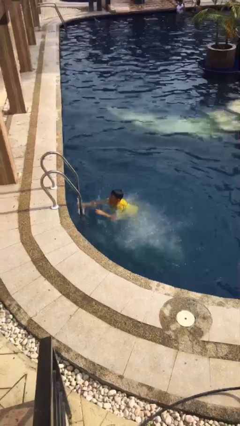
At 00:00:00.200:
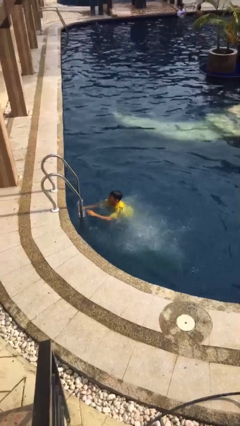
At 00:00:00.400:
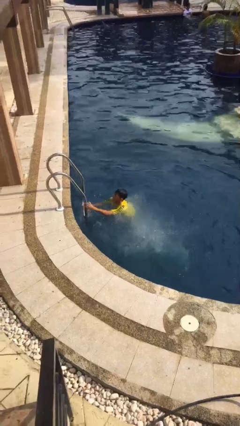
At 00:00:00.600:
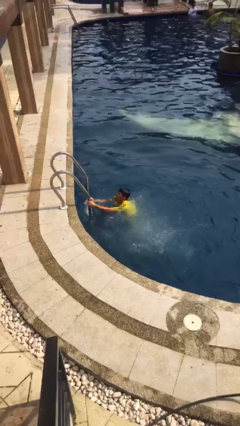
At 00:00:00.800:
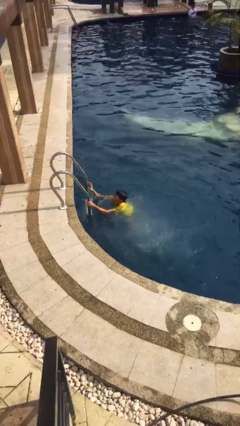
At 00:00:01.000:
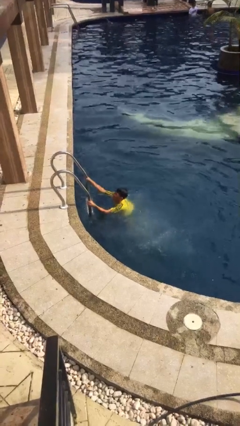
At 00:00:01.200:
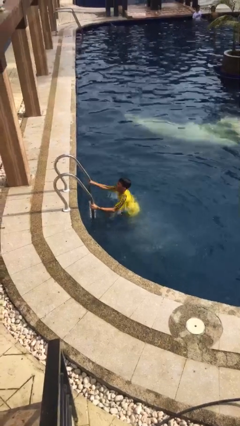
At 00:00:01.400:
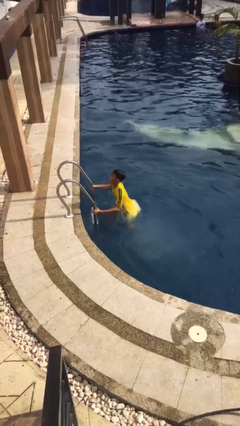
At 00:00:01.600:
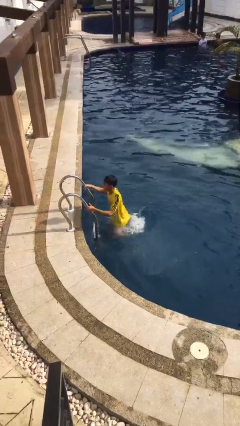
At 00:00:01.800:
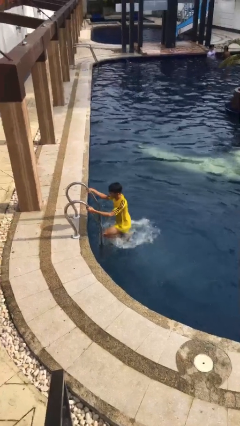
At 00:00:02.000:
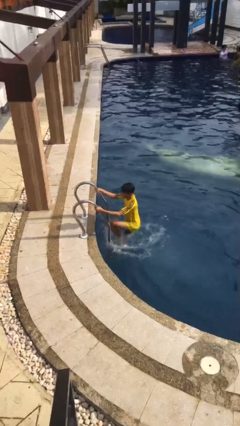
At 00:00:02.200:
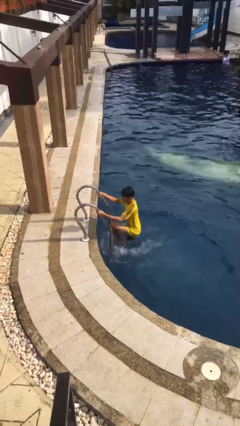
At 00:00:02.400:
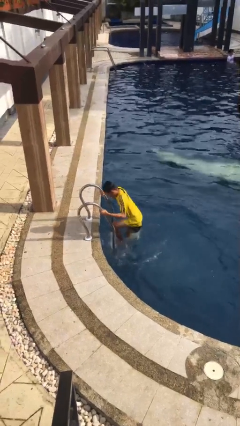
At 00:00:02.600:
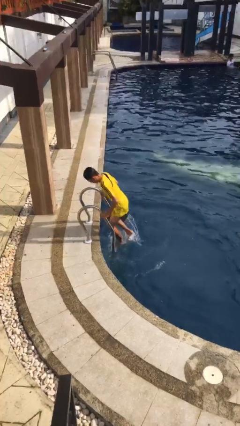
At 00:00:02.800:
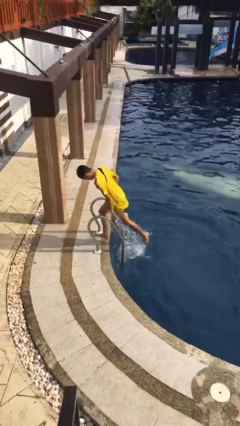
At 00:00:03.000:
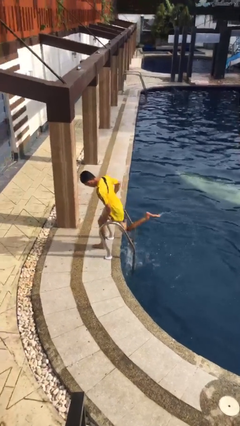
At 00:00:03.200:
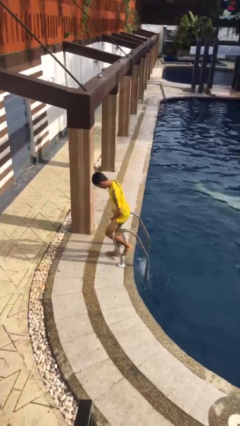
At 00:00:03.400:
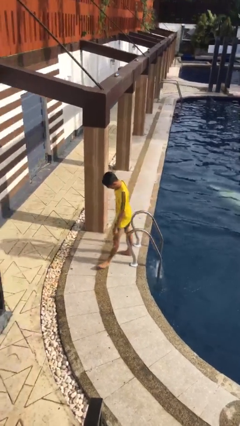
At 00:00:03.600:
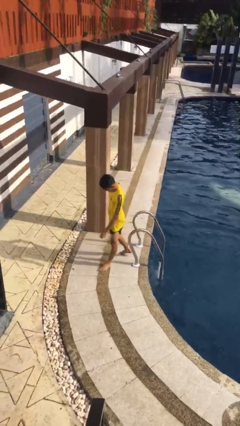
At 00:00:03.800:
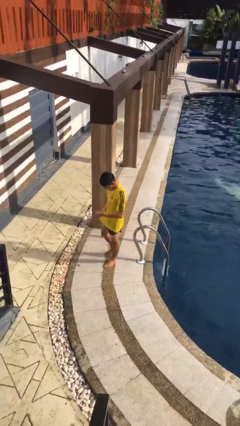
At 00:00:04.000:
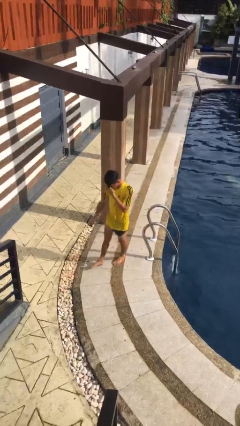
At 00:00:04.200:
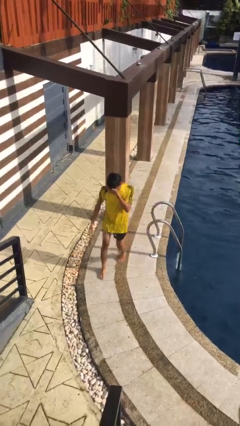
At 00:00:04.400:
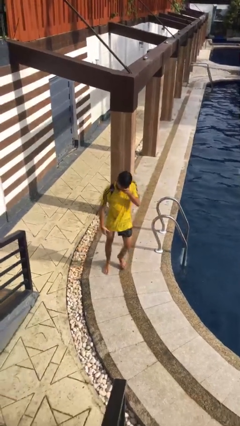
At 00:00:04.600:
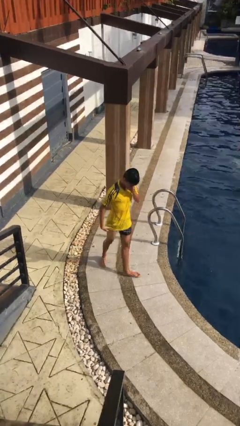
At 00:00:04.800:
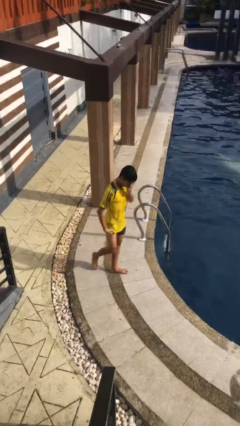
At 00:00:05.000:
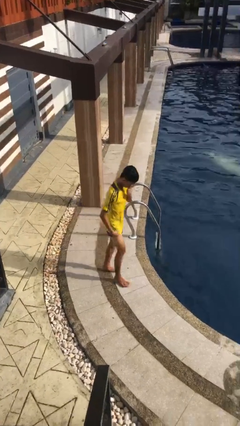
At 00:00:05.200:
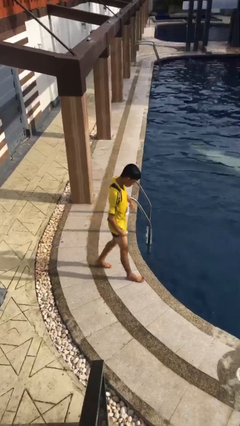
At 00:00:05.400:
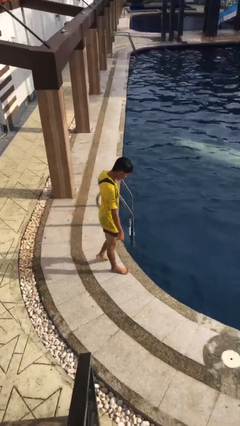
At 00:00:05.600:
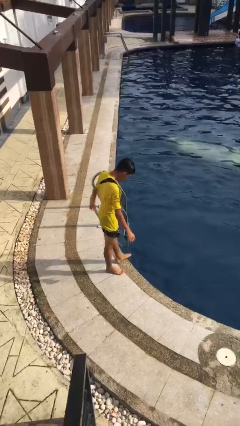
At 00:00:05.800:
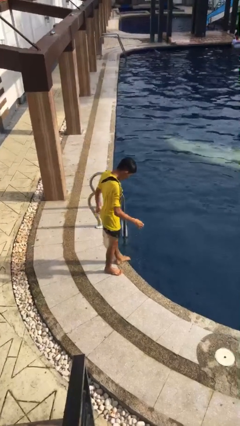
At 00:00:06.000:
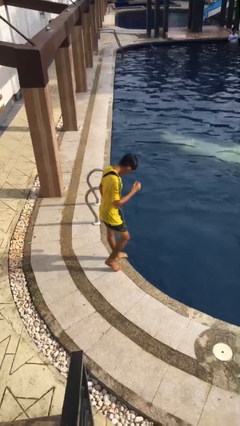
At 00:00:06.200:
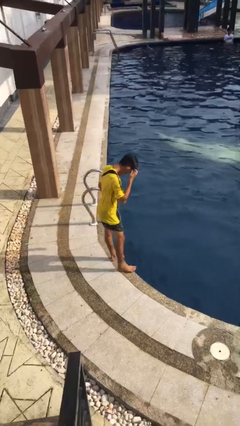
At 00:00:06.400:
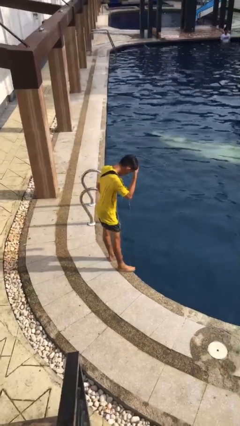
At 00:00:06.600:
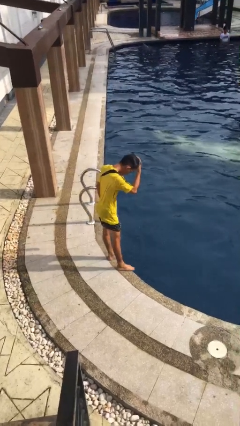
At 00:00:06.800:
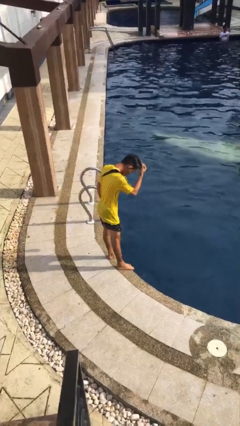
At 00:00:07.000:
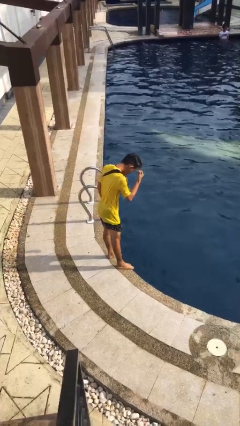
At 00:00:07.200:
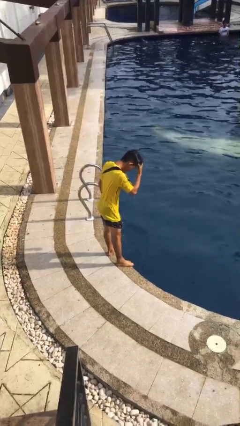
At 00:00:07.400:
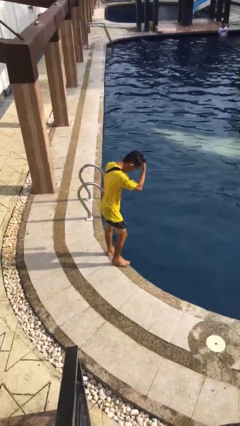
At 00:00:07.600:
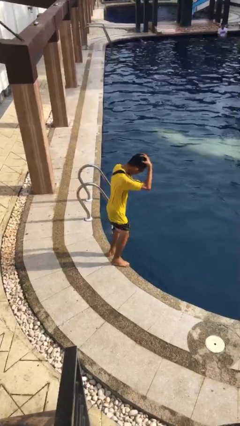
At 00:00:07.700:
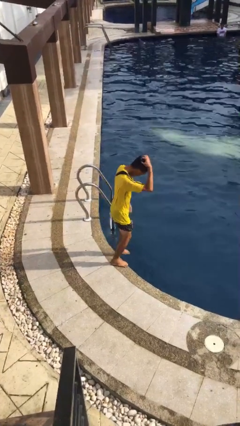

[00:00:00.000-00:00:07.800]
person exits pool

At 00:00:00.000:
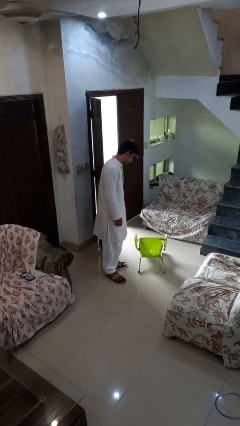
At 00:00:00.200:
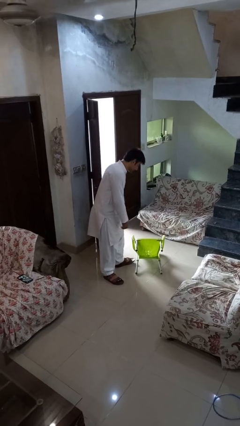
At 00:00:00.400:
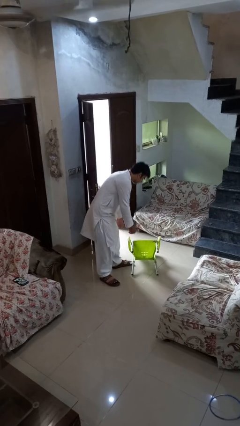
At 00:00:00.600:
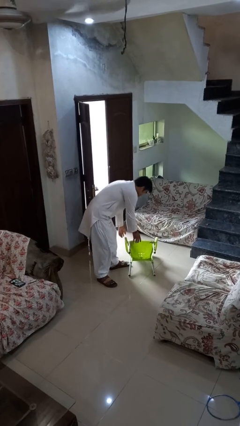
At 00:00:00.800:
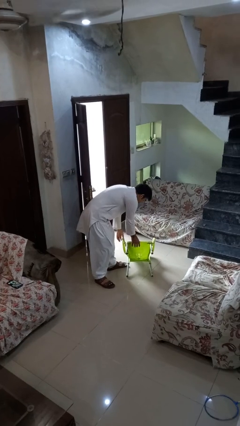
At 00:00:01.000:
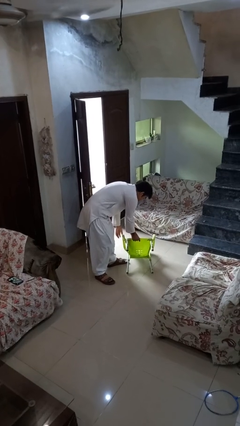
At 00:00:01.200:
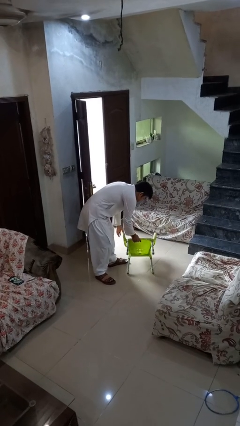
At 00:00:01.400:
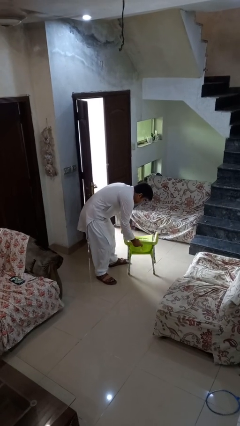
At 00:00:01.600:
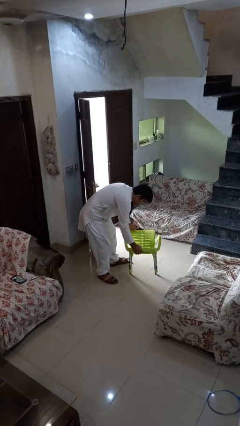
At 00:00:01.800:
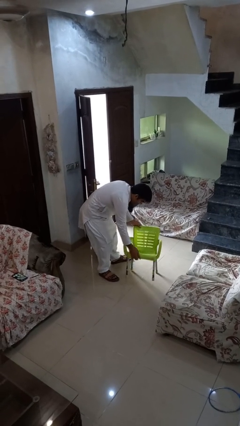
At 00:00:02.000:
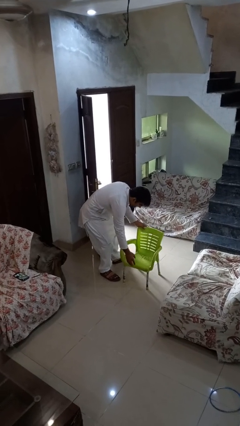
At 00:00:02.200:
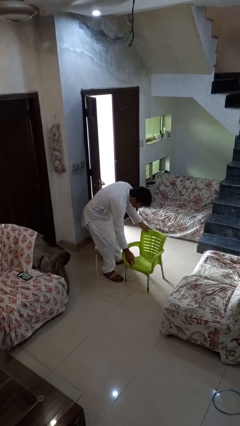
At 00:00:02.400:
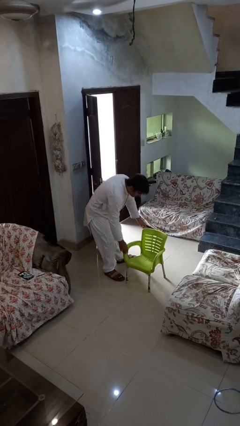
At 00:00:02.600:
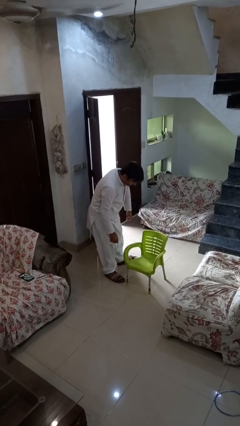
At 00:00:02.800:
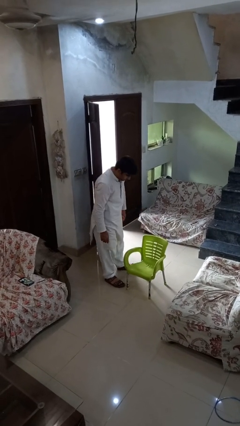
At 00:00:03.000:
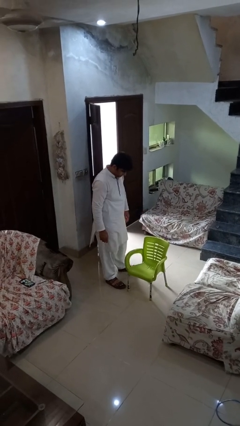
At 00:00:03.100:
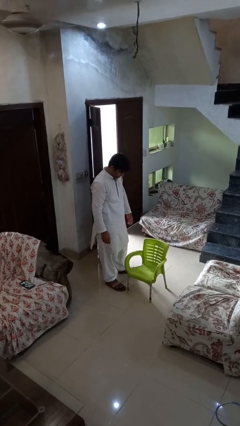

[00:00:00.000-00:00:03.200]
person sets upright furniture

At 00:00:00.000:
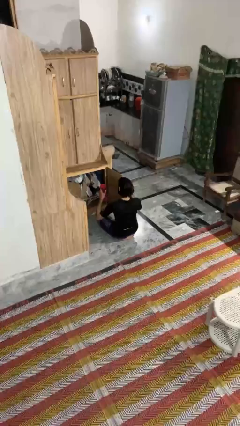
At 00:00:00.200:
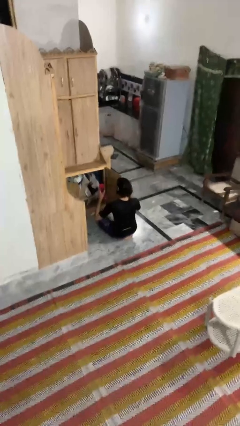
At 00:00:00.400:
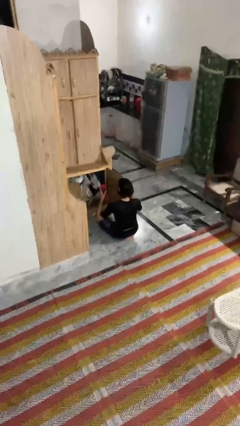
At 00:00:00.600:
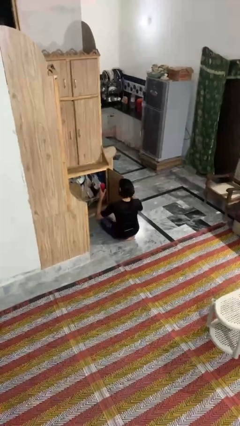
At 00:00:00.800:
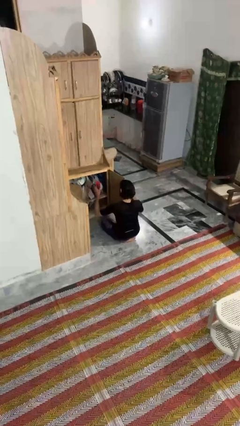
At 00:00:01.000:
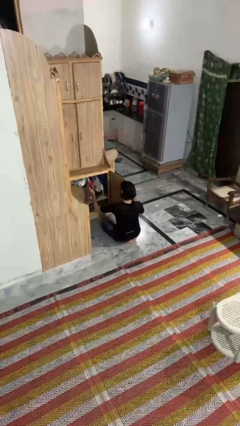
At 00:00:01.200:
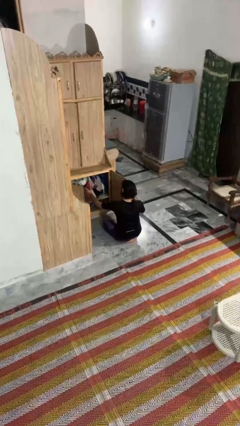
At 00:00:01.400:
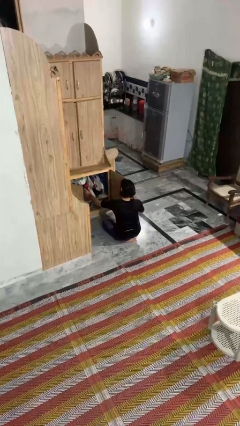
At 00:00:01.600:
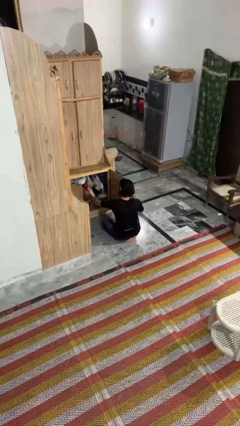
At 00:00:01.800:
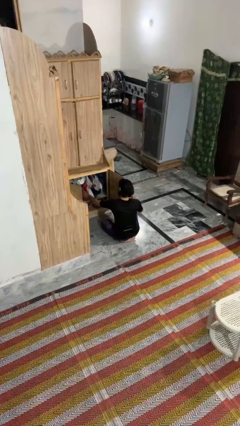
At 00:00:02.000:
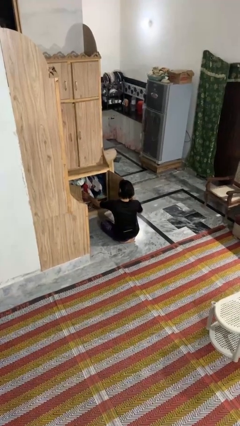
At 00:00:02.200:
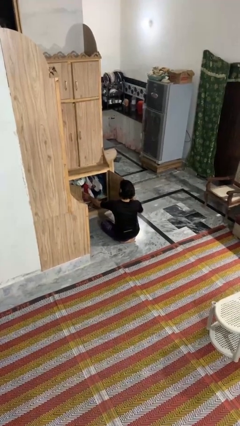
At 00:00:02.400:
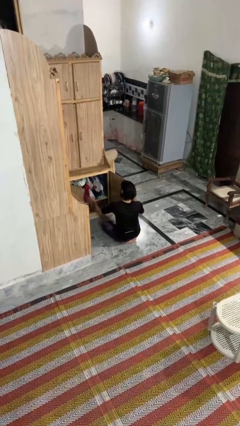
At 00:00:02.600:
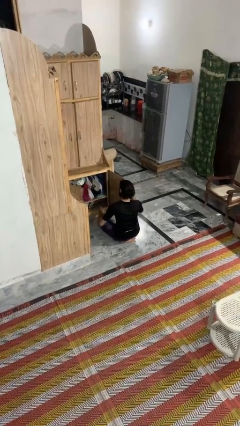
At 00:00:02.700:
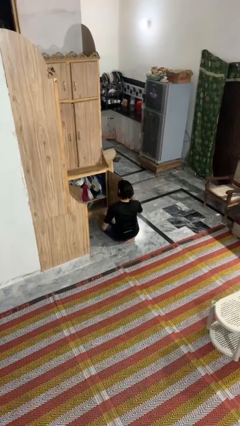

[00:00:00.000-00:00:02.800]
person puts down object into cabinet

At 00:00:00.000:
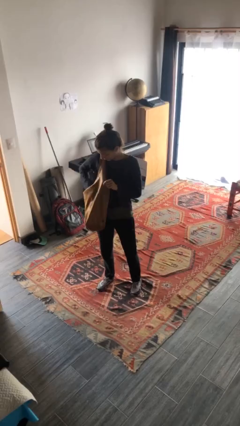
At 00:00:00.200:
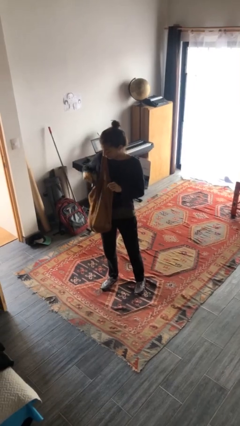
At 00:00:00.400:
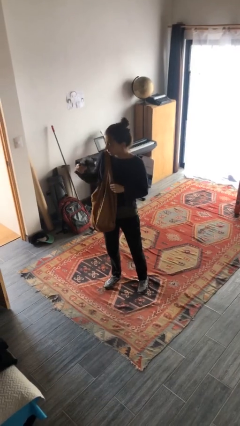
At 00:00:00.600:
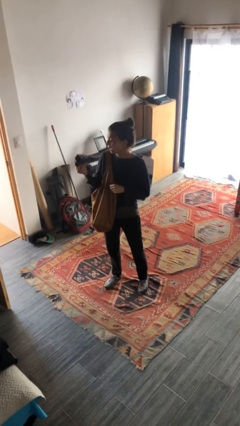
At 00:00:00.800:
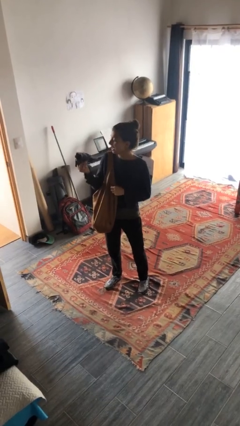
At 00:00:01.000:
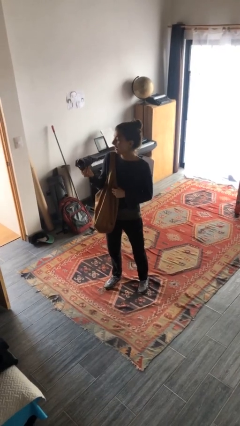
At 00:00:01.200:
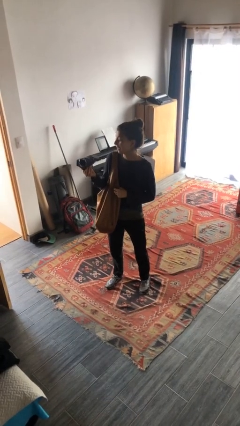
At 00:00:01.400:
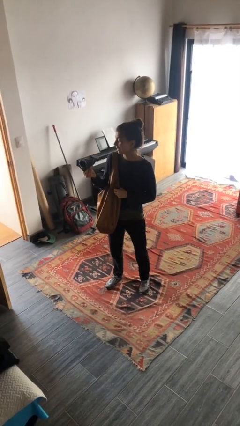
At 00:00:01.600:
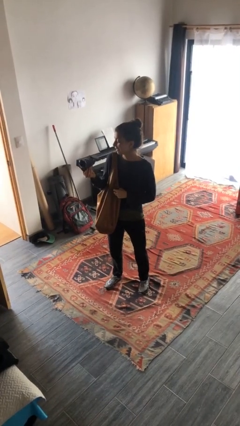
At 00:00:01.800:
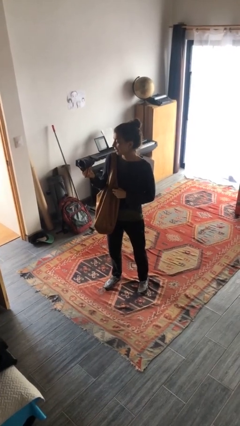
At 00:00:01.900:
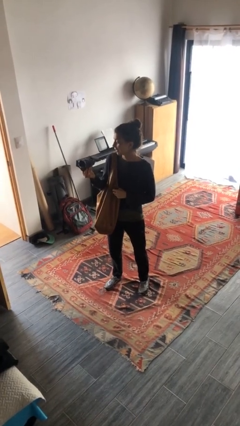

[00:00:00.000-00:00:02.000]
person takes object from purse

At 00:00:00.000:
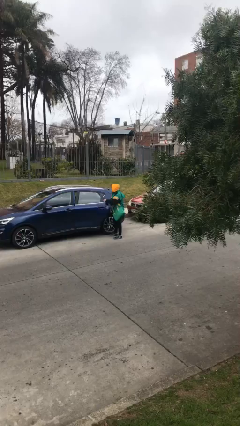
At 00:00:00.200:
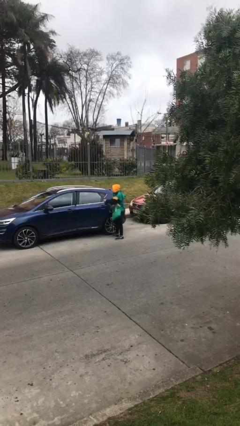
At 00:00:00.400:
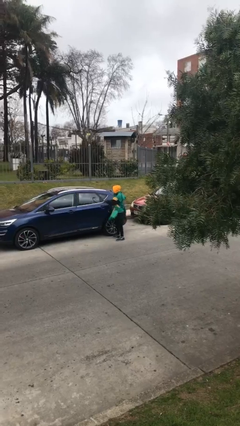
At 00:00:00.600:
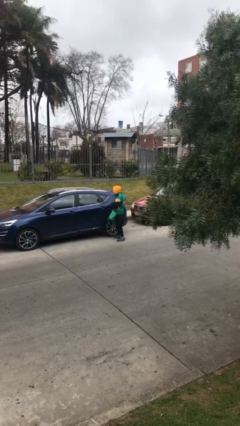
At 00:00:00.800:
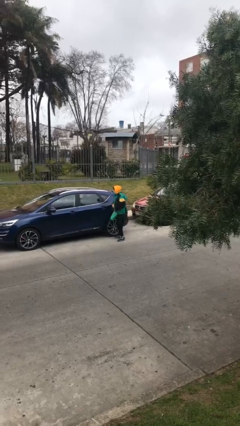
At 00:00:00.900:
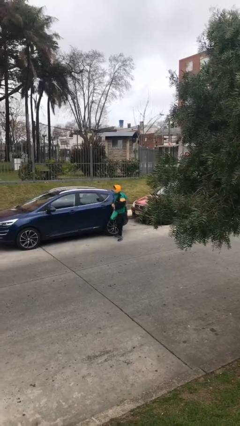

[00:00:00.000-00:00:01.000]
person closes car door

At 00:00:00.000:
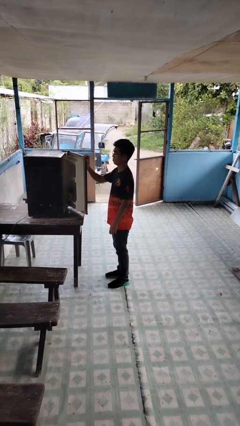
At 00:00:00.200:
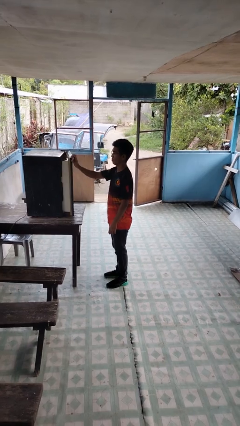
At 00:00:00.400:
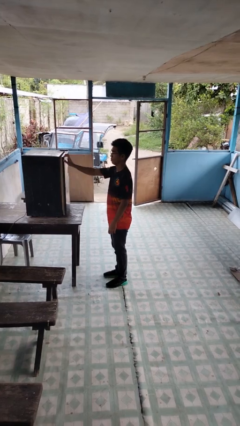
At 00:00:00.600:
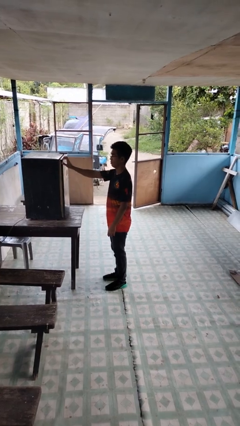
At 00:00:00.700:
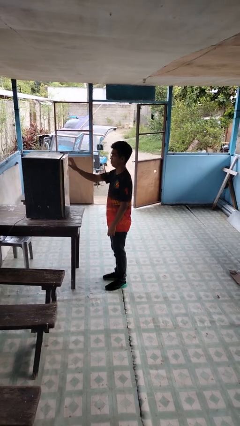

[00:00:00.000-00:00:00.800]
person closes refrigerator
